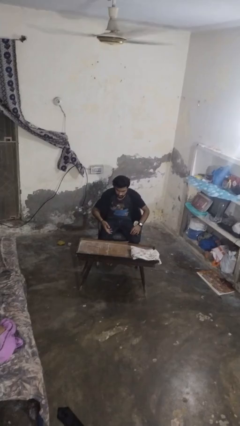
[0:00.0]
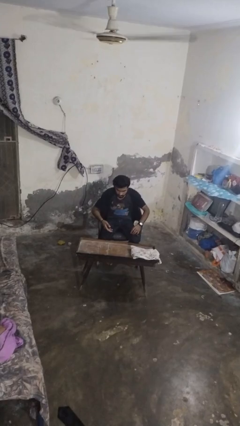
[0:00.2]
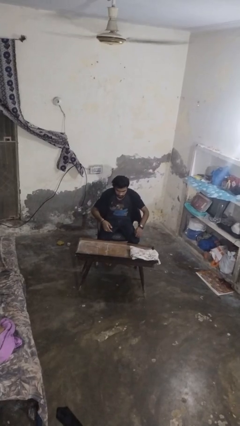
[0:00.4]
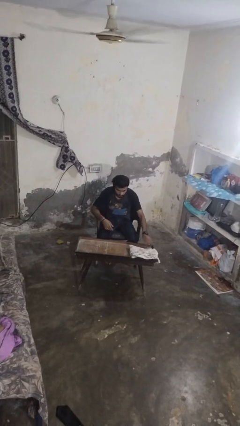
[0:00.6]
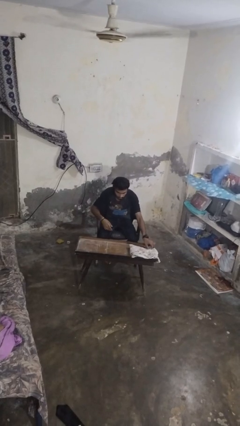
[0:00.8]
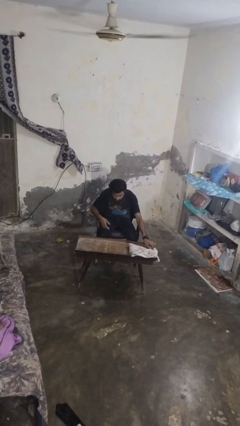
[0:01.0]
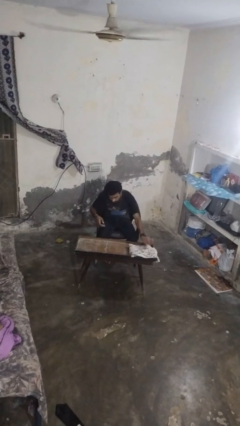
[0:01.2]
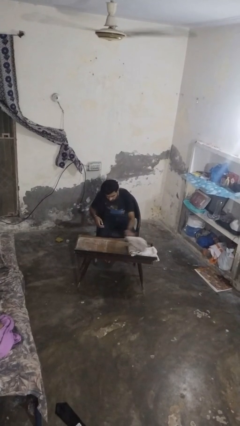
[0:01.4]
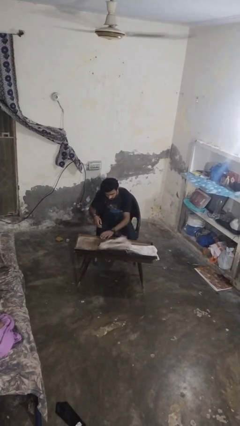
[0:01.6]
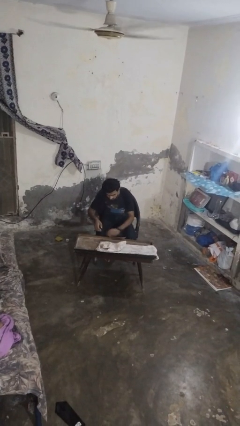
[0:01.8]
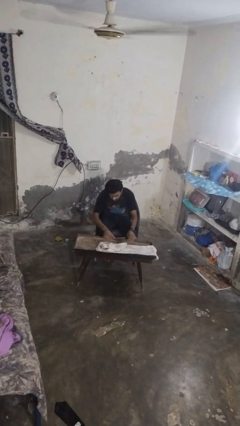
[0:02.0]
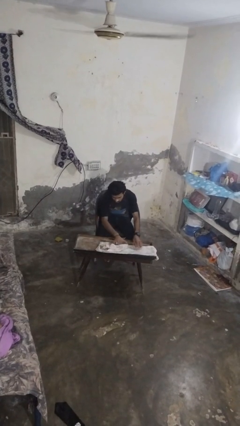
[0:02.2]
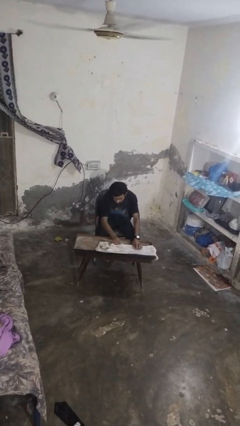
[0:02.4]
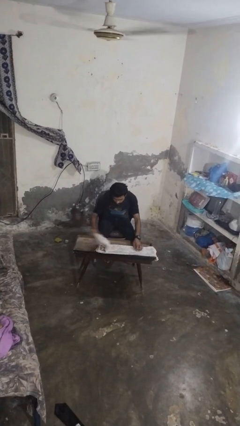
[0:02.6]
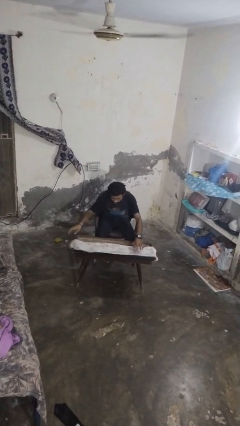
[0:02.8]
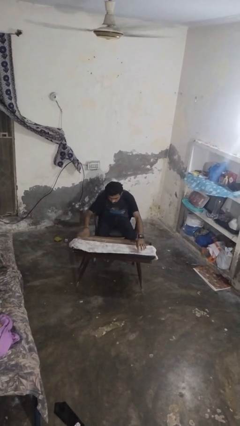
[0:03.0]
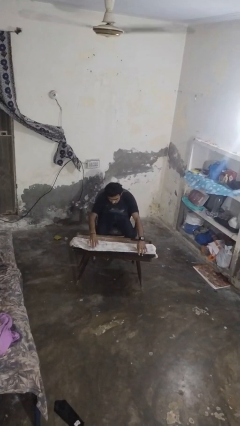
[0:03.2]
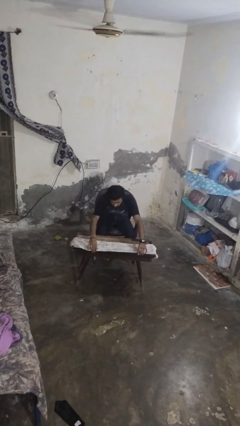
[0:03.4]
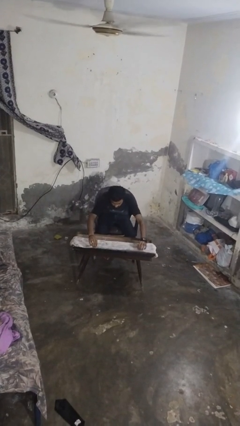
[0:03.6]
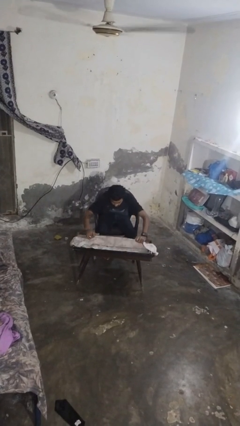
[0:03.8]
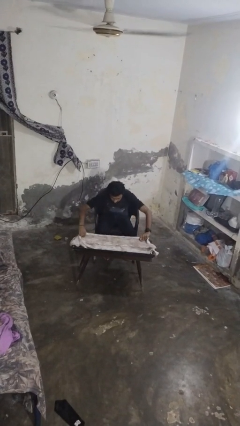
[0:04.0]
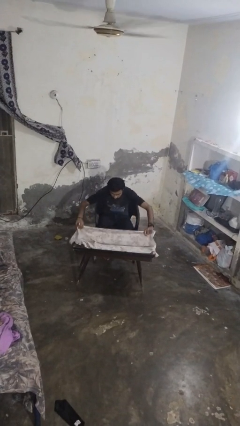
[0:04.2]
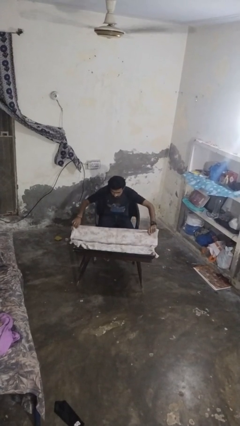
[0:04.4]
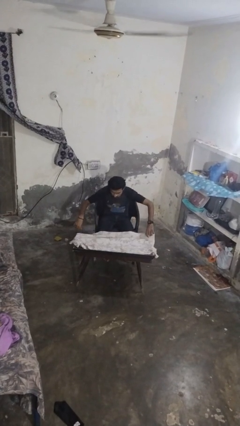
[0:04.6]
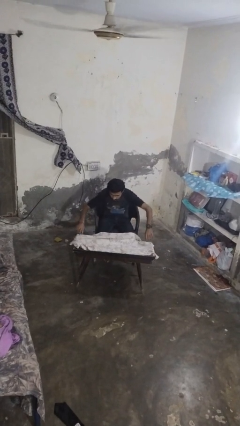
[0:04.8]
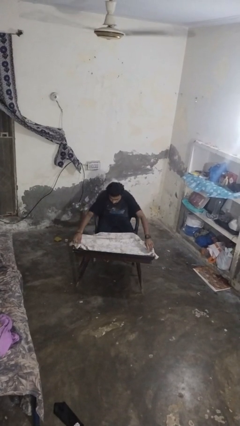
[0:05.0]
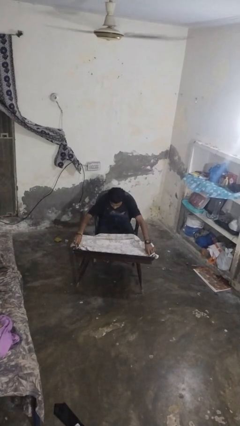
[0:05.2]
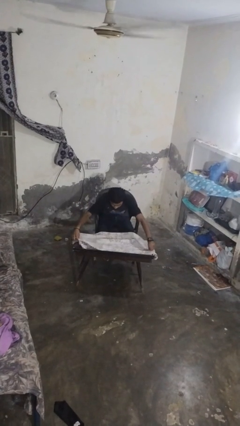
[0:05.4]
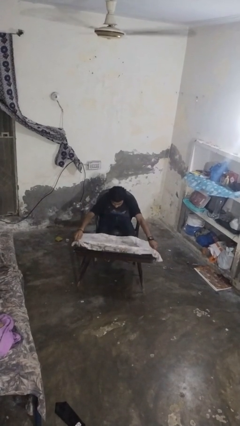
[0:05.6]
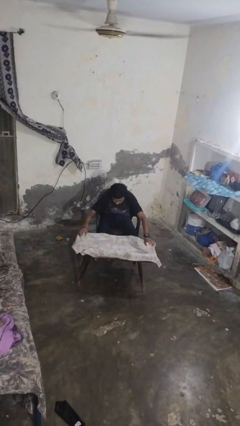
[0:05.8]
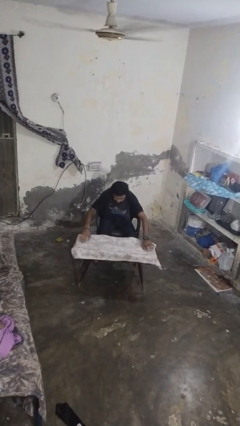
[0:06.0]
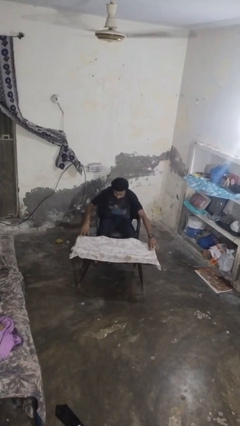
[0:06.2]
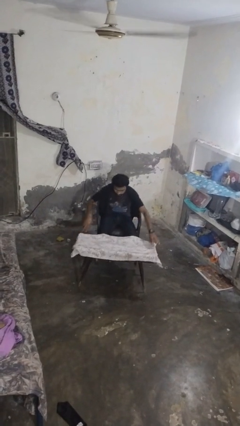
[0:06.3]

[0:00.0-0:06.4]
person spreads tablecloth

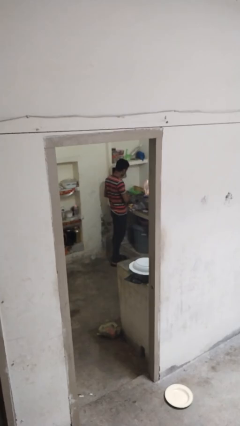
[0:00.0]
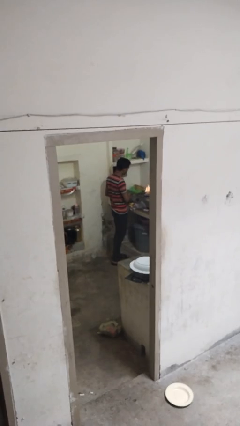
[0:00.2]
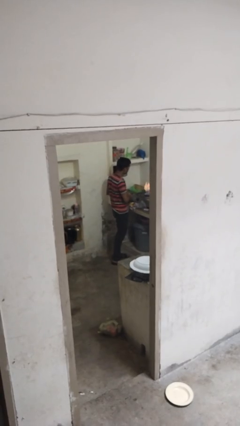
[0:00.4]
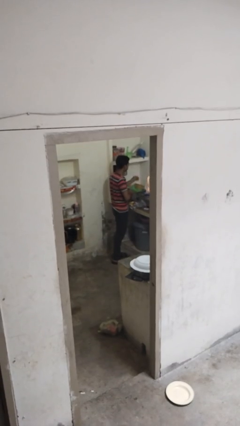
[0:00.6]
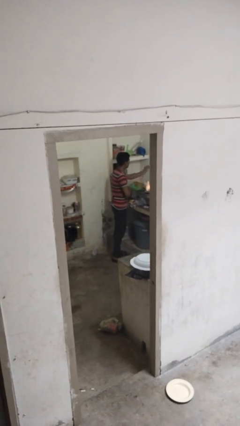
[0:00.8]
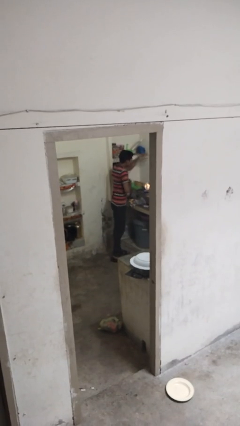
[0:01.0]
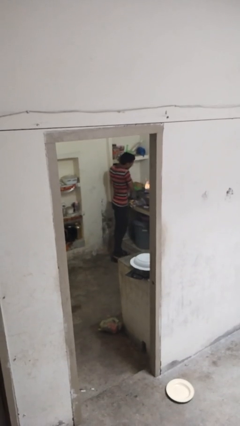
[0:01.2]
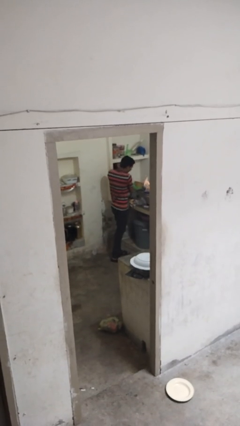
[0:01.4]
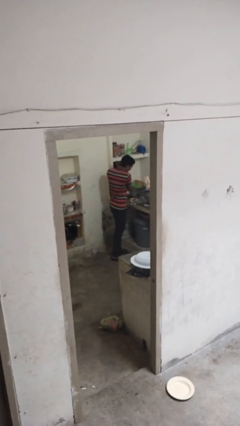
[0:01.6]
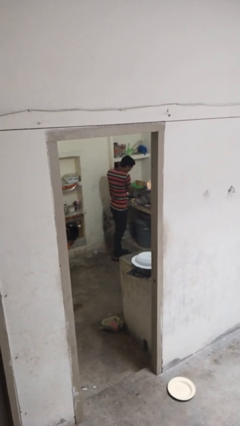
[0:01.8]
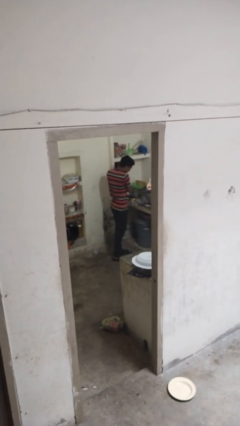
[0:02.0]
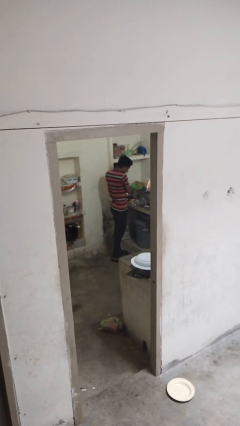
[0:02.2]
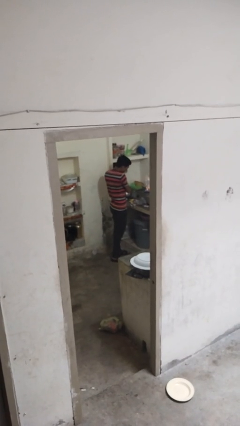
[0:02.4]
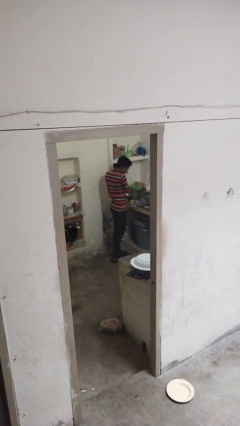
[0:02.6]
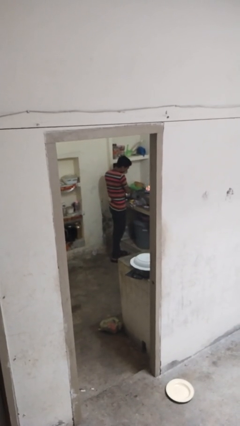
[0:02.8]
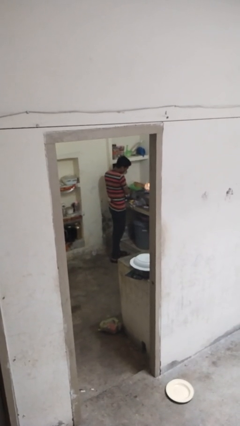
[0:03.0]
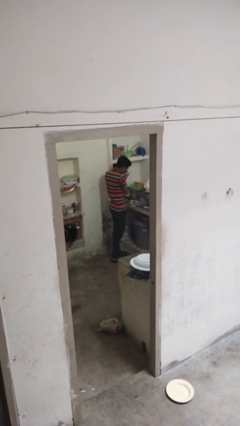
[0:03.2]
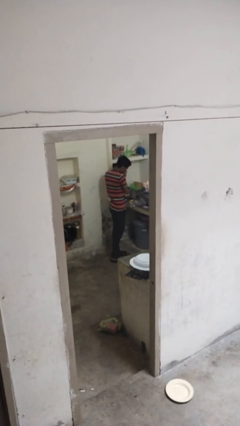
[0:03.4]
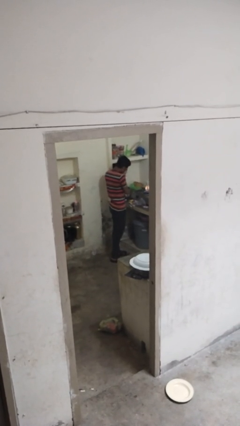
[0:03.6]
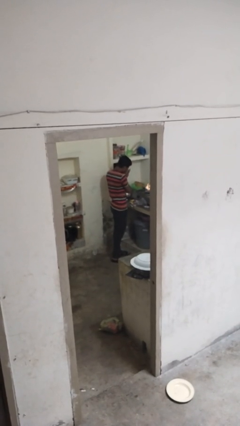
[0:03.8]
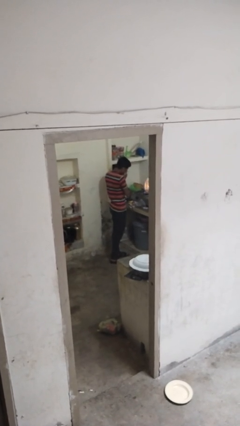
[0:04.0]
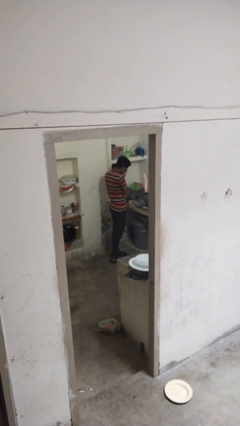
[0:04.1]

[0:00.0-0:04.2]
person burns hand

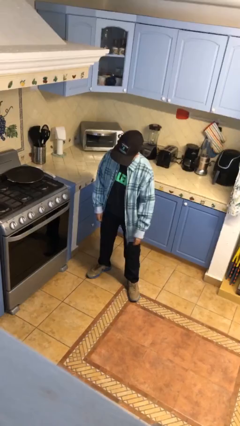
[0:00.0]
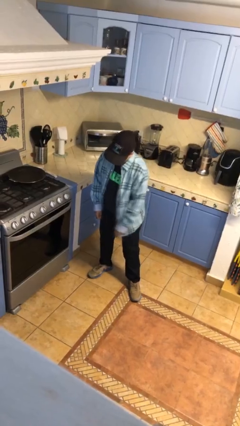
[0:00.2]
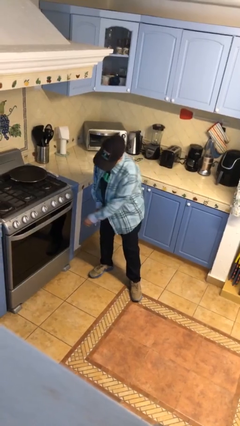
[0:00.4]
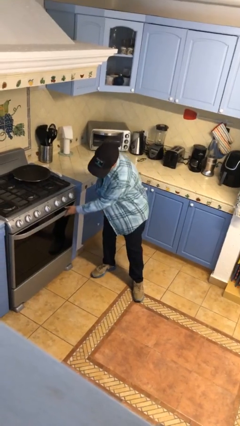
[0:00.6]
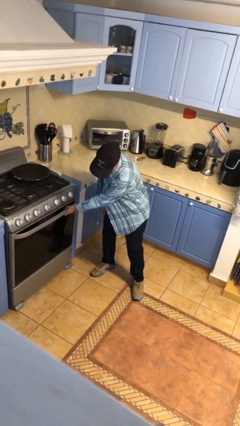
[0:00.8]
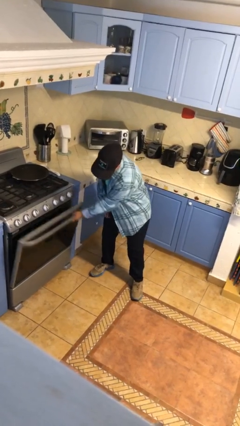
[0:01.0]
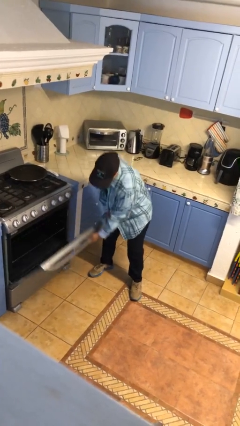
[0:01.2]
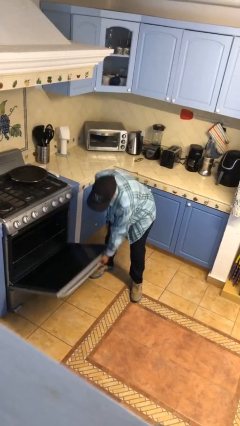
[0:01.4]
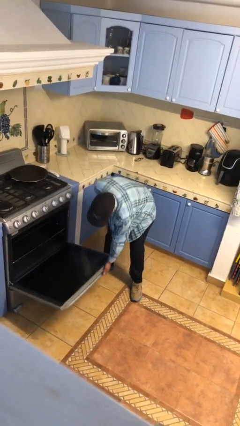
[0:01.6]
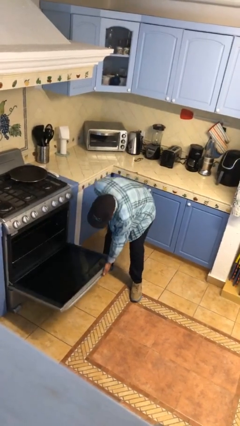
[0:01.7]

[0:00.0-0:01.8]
person opens oven door

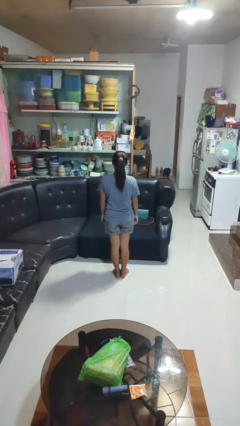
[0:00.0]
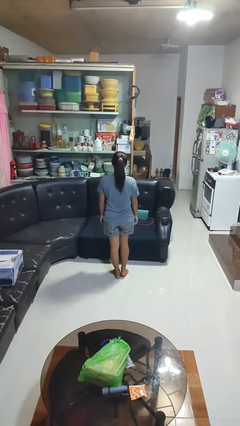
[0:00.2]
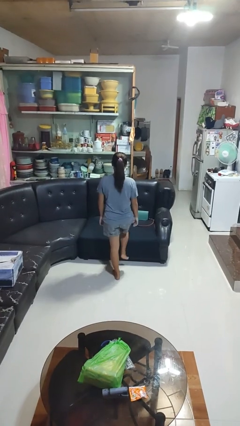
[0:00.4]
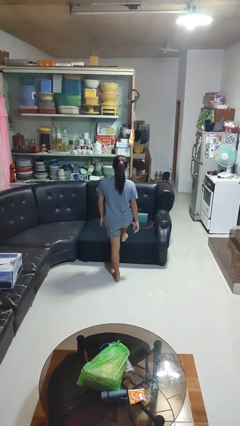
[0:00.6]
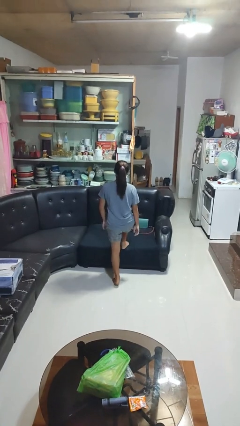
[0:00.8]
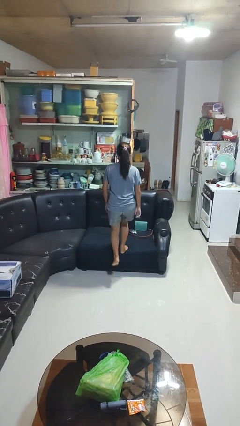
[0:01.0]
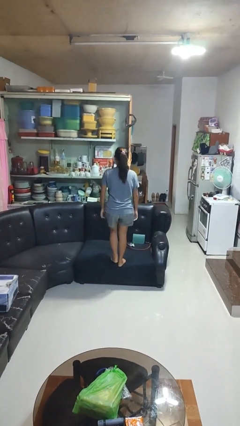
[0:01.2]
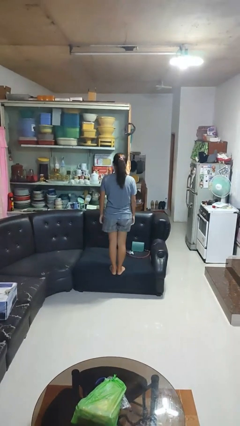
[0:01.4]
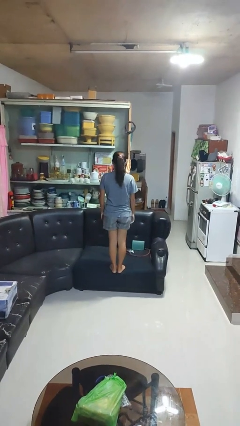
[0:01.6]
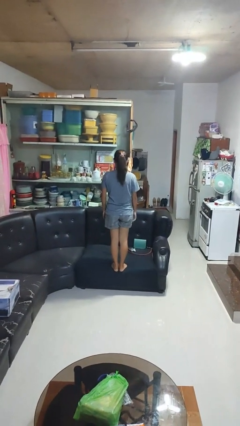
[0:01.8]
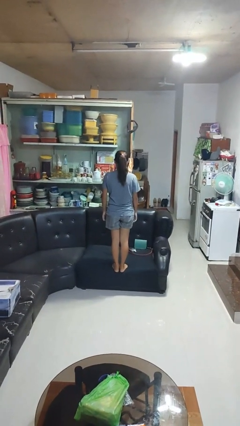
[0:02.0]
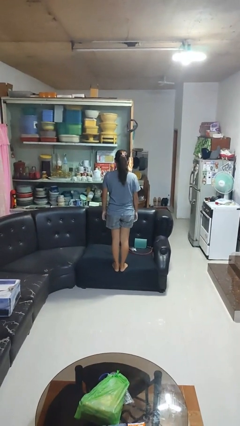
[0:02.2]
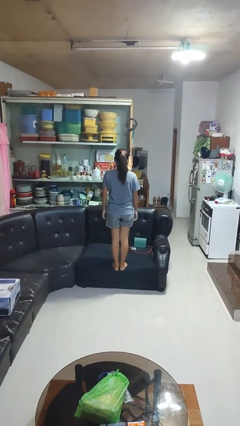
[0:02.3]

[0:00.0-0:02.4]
person climbs on couch

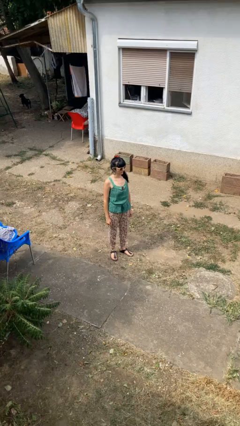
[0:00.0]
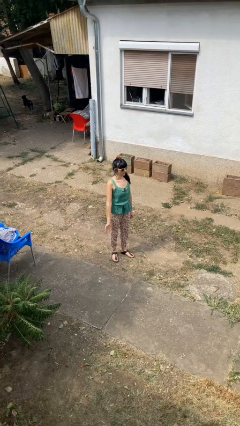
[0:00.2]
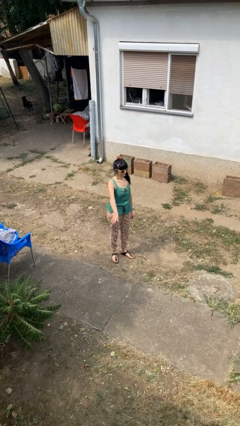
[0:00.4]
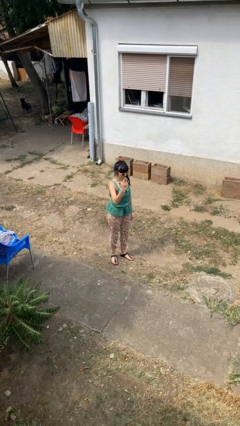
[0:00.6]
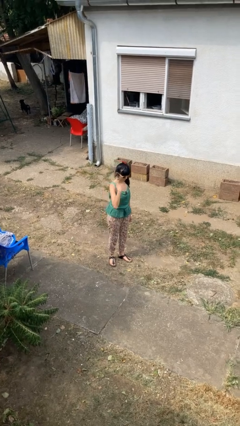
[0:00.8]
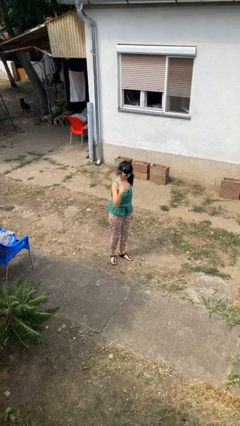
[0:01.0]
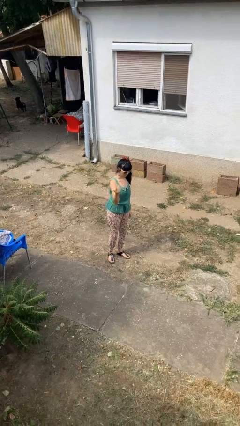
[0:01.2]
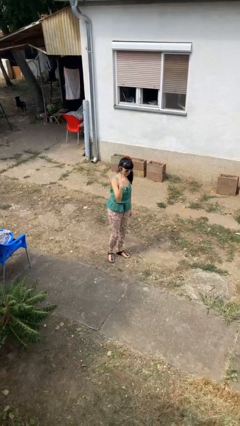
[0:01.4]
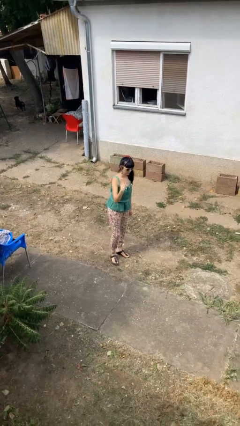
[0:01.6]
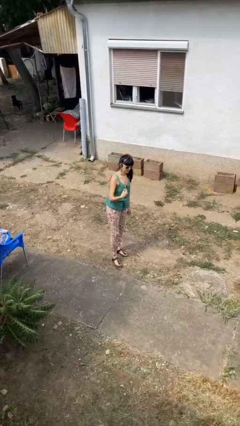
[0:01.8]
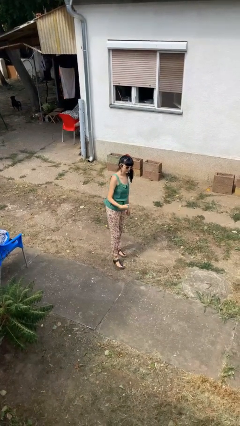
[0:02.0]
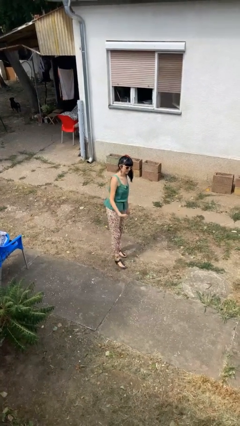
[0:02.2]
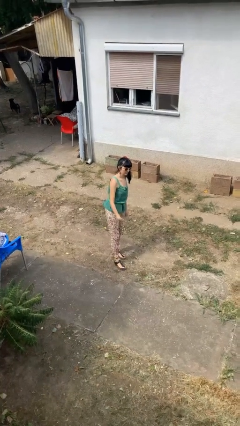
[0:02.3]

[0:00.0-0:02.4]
person gestures come here

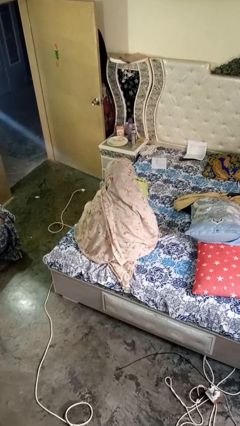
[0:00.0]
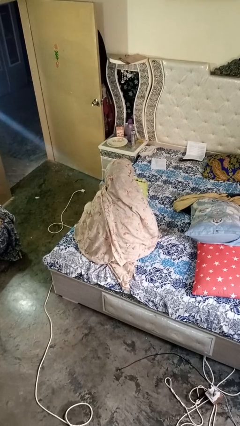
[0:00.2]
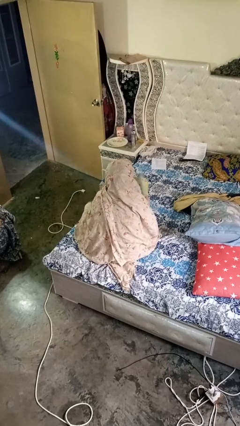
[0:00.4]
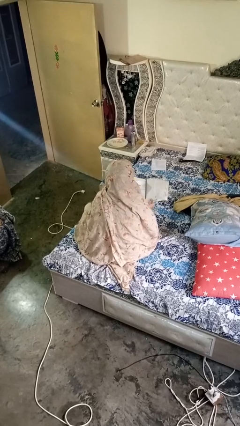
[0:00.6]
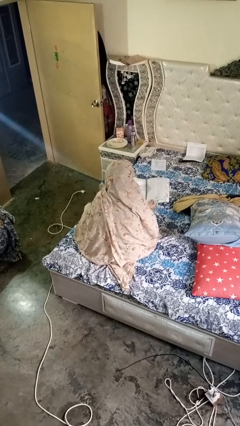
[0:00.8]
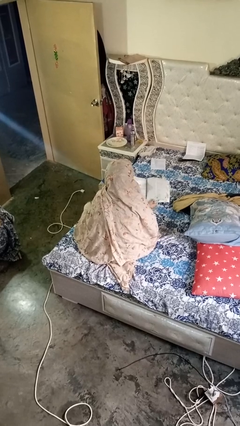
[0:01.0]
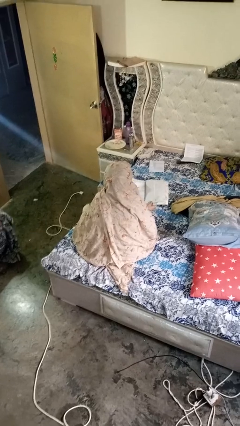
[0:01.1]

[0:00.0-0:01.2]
person reads magazine
